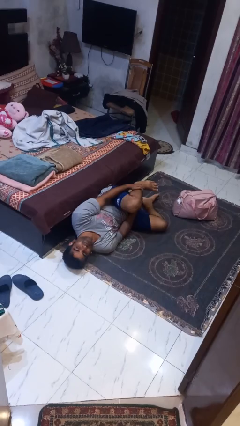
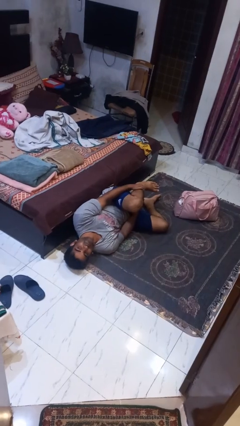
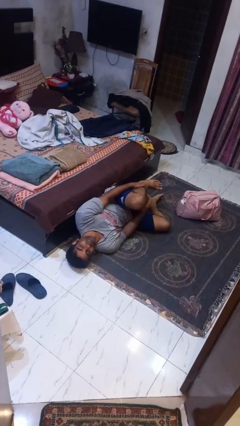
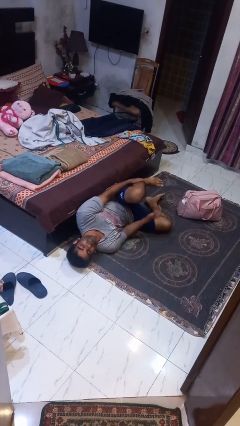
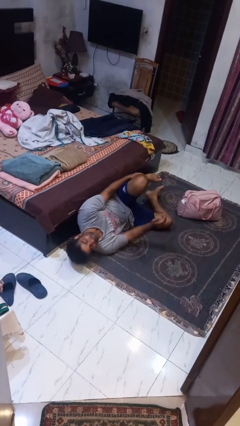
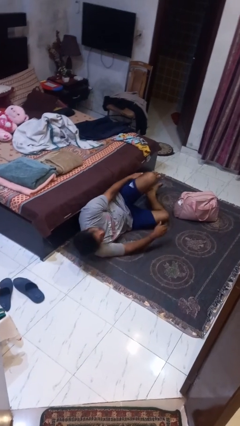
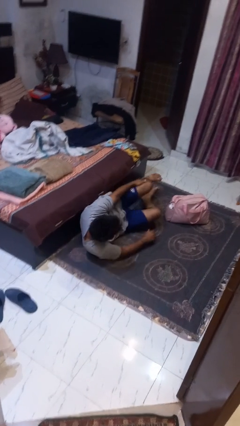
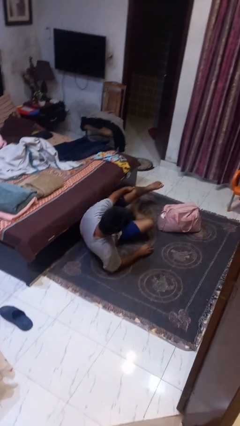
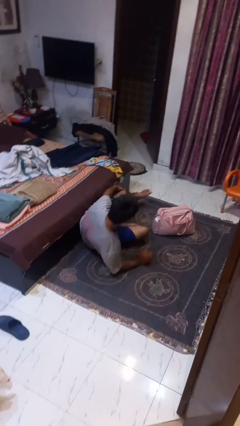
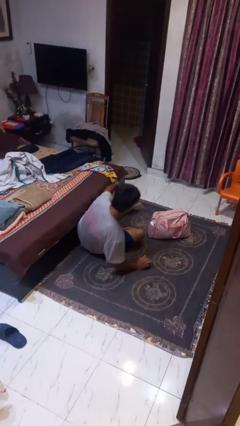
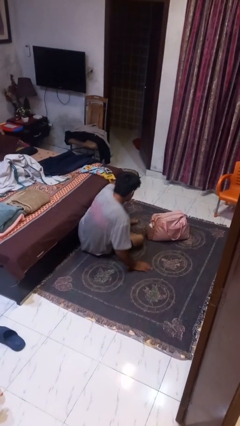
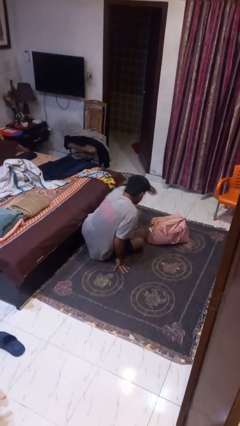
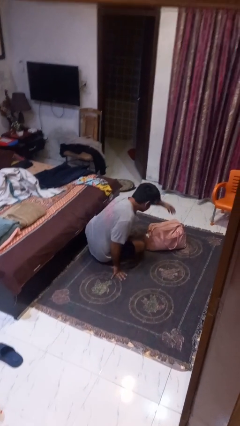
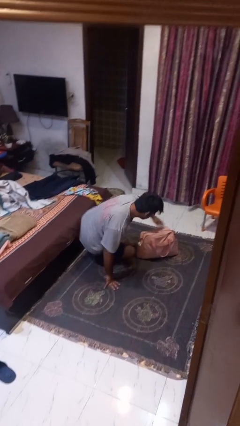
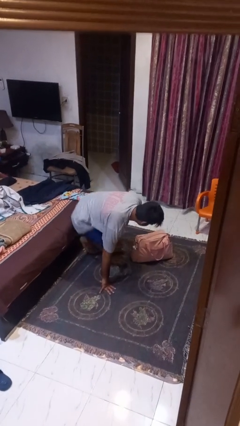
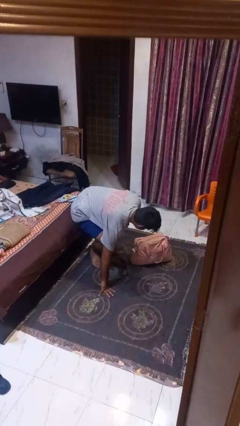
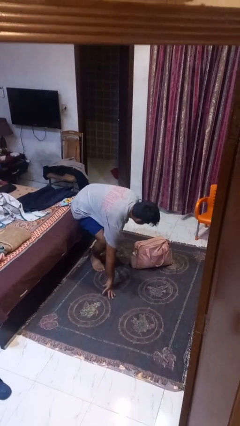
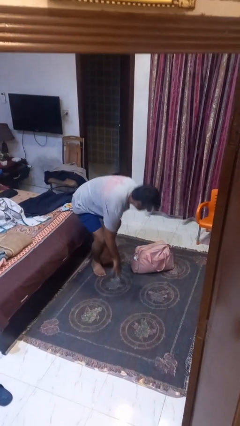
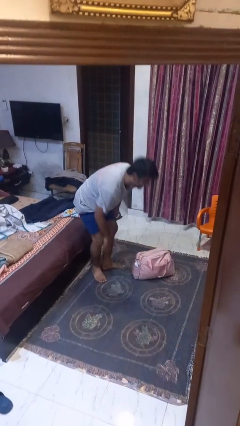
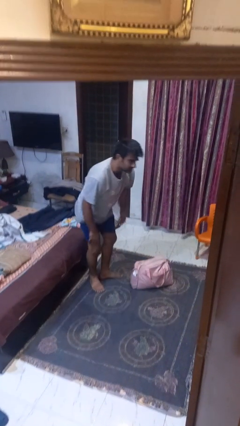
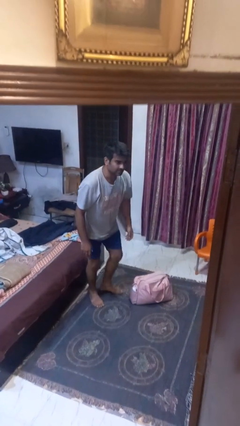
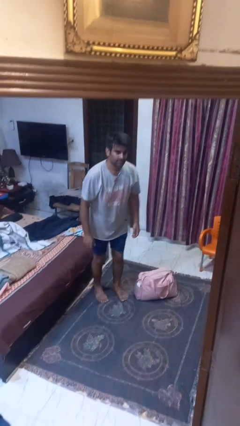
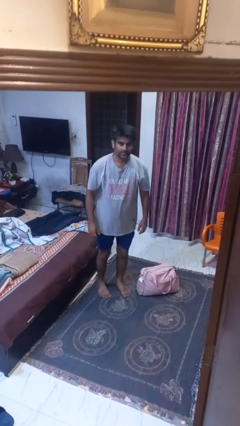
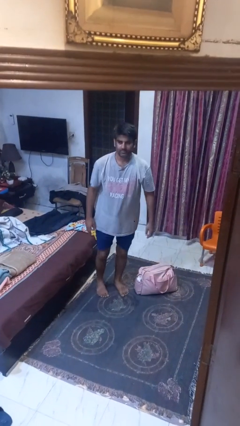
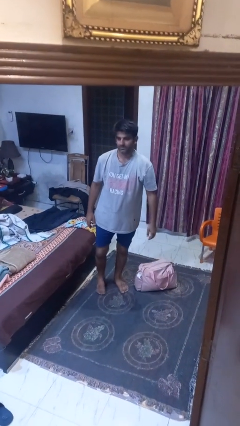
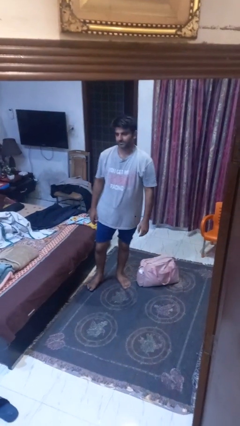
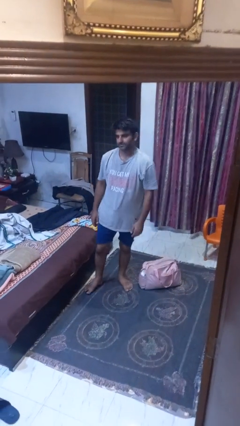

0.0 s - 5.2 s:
person stands up from floor

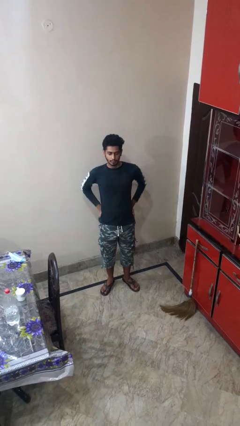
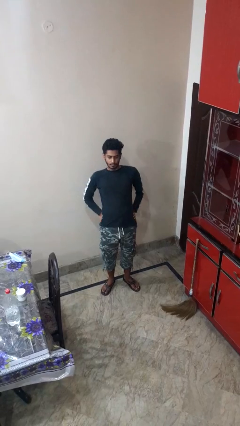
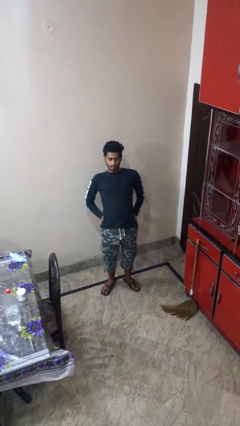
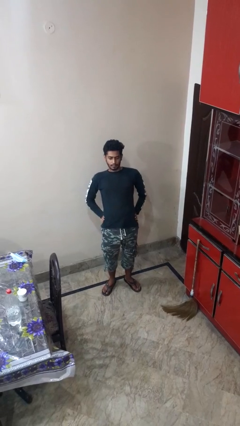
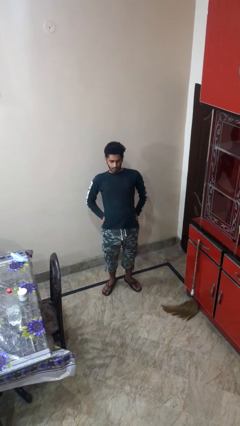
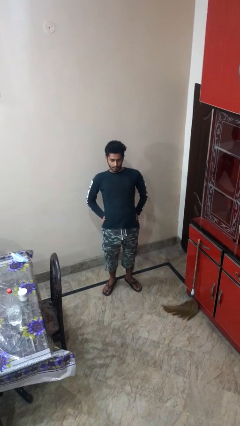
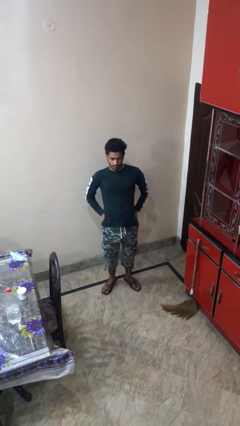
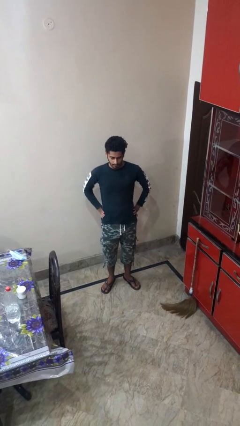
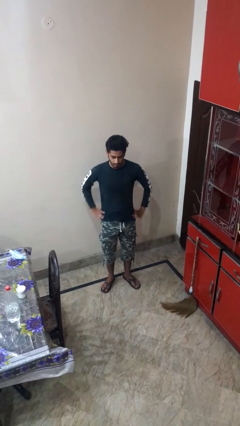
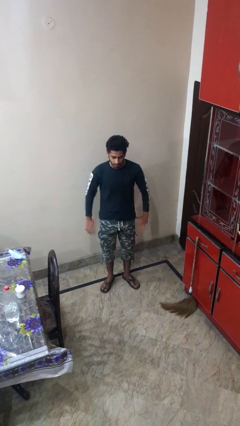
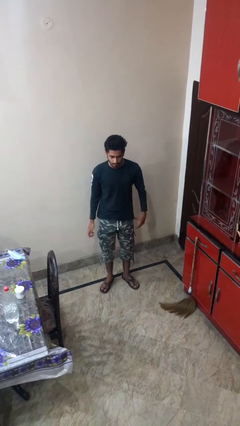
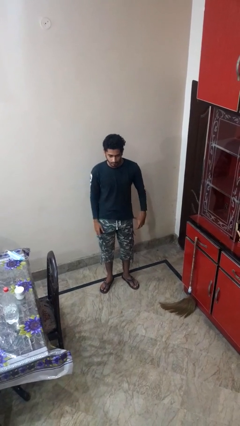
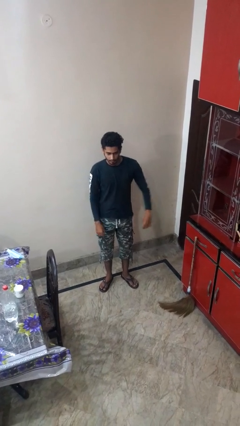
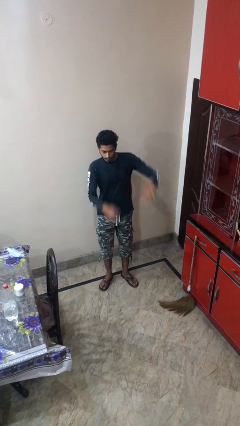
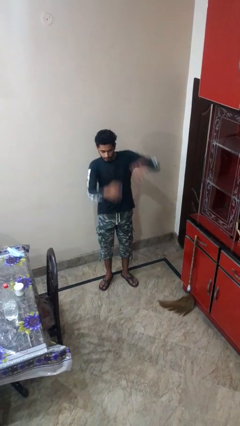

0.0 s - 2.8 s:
person stretches back

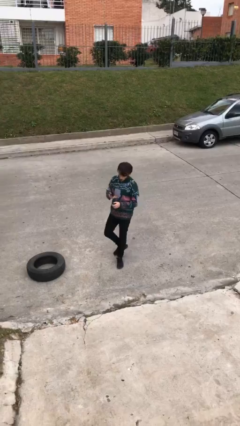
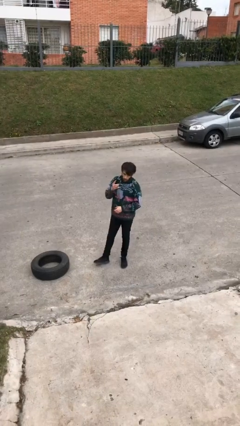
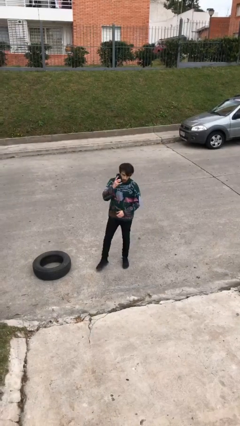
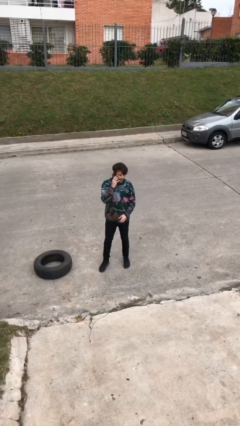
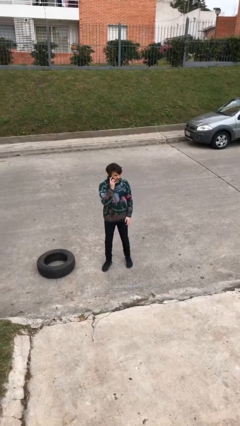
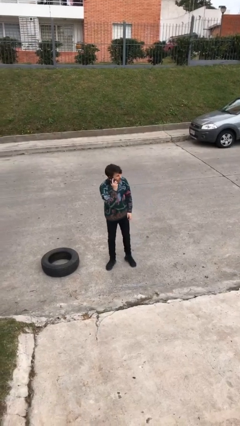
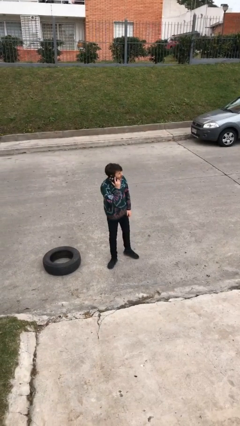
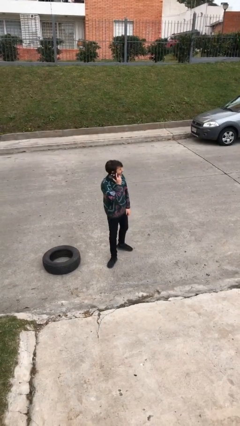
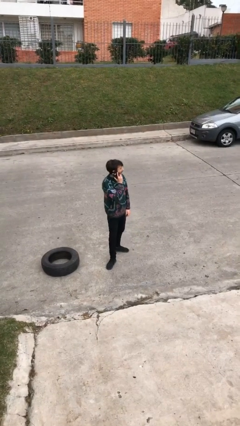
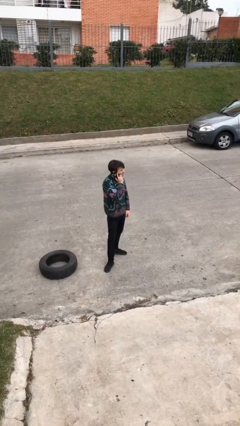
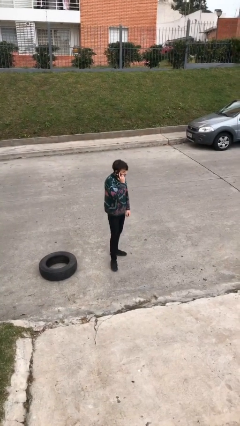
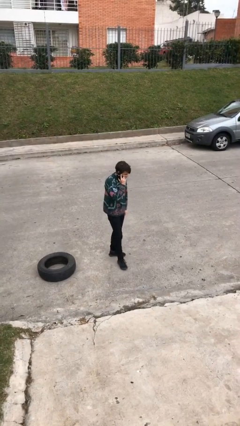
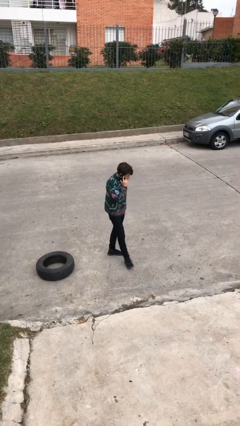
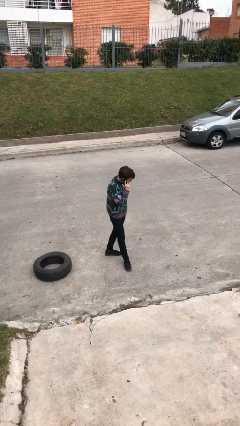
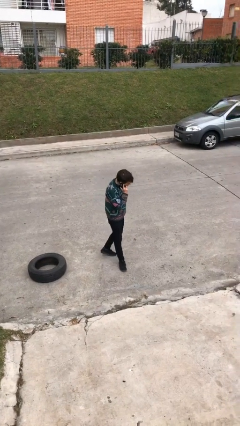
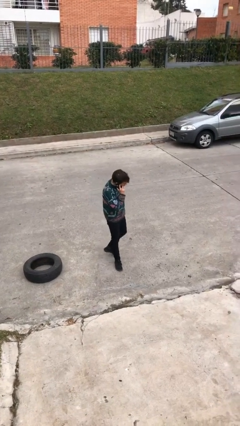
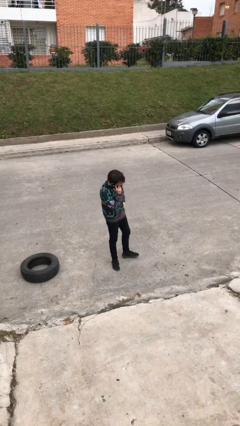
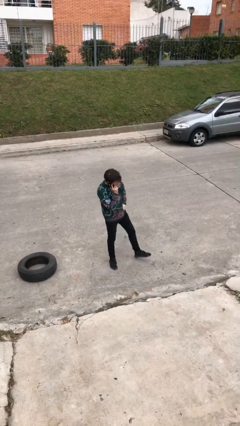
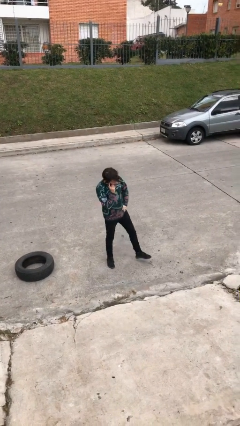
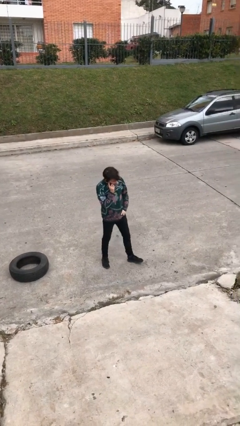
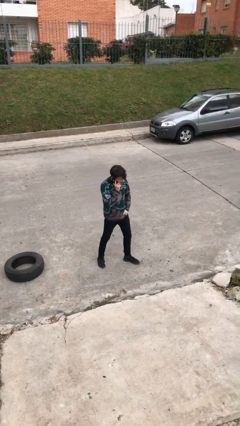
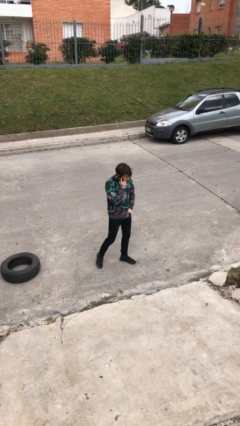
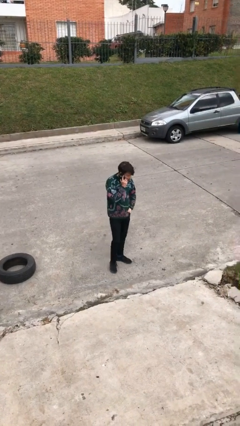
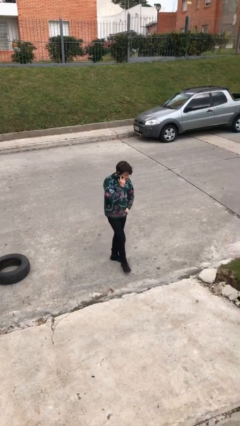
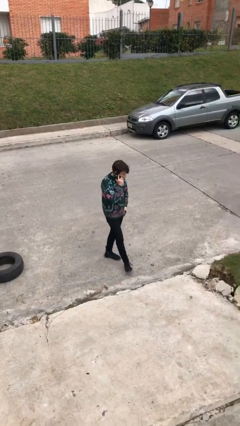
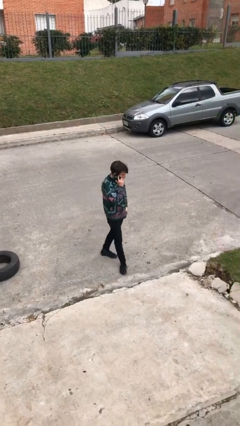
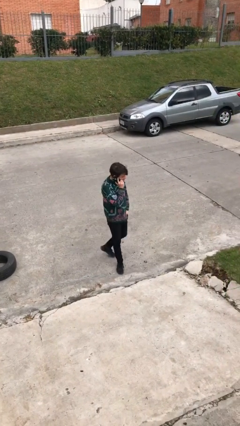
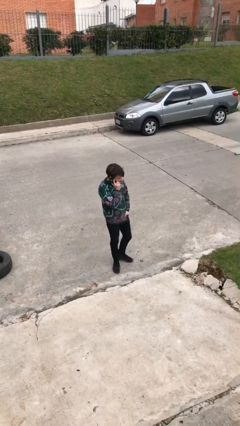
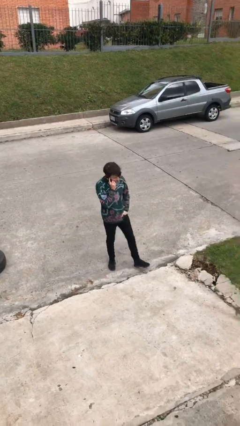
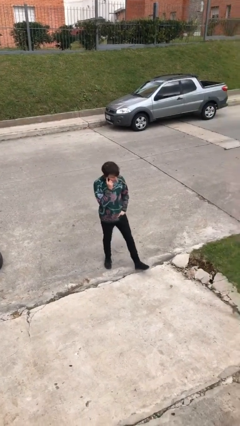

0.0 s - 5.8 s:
person talks on phone

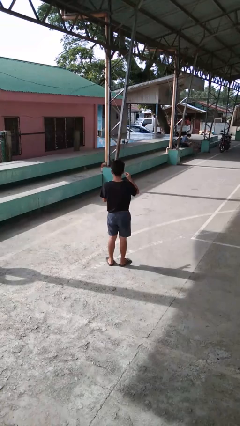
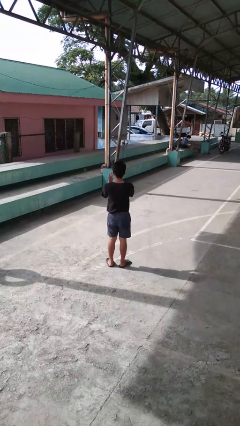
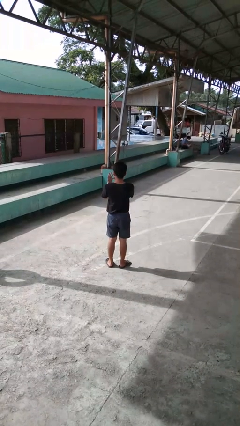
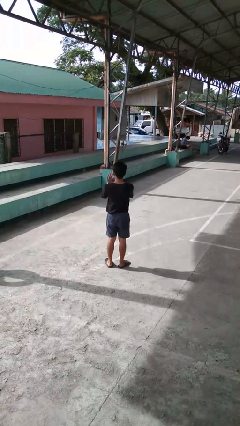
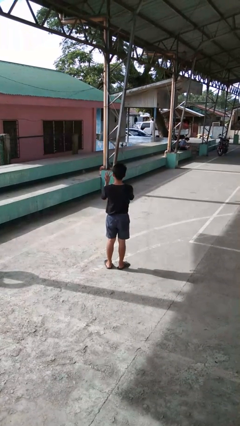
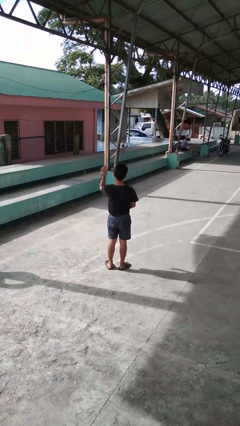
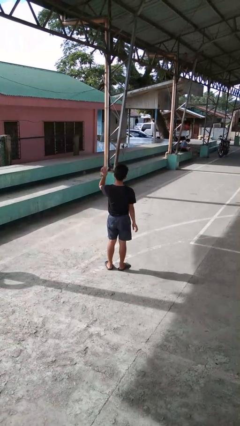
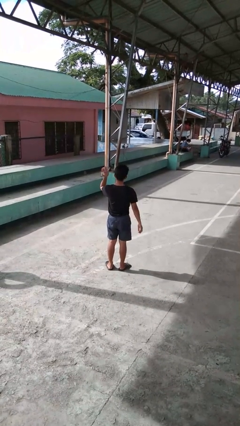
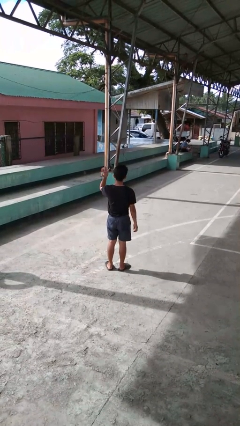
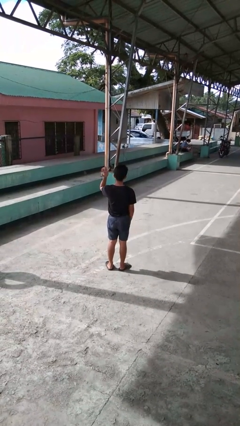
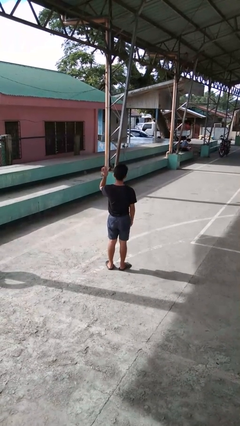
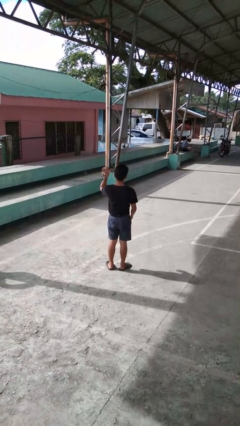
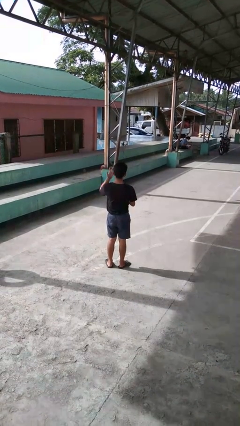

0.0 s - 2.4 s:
person puts on ring

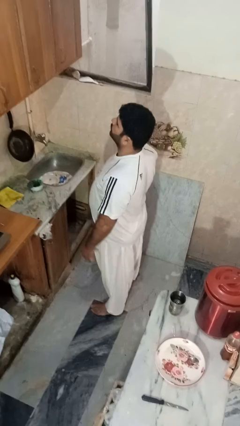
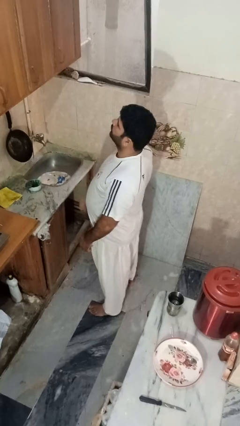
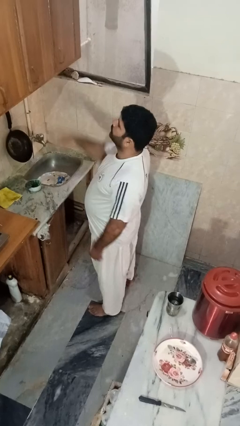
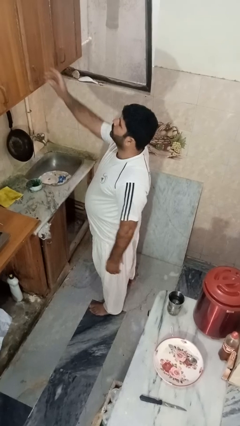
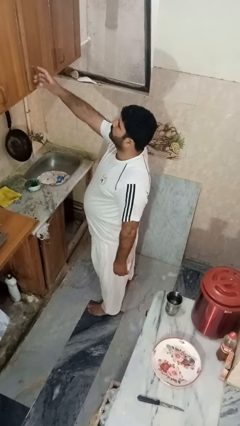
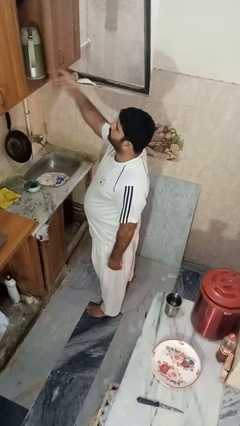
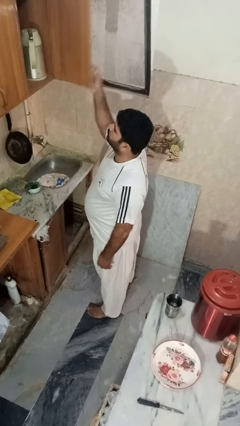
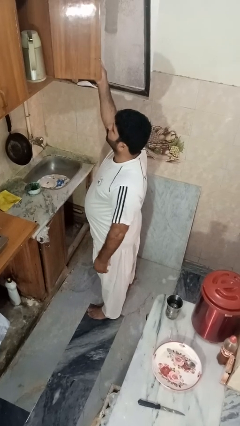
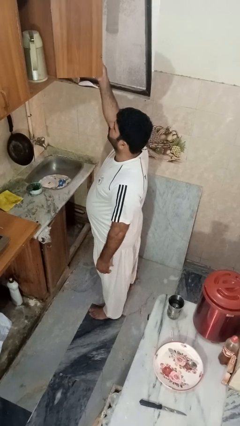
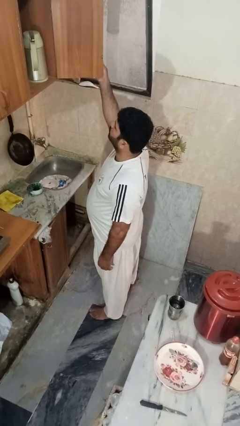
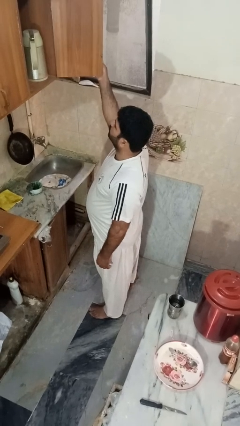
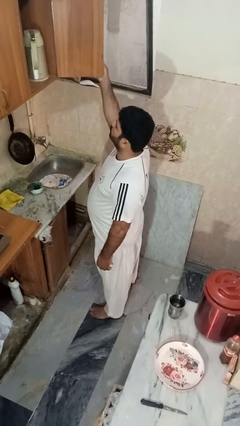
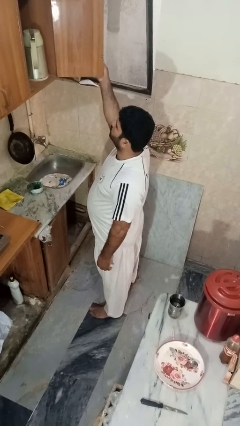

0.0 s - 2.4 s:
person opens cabinet
